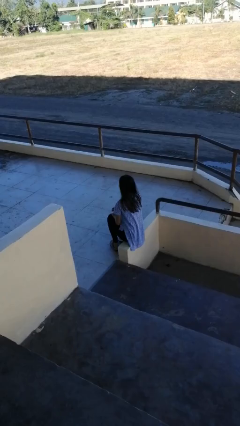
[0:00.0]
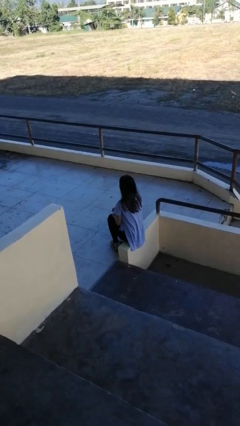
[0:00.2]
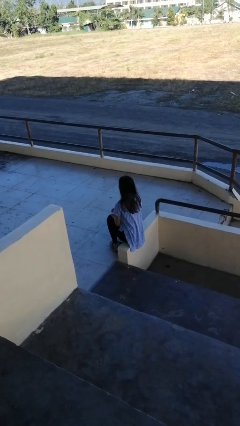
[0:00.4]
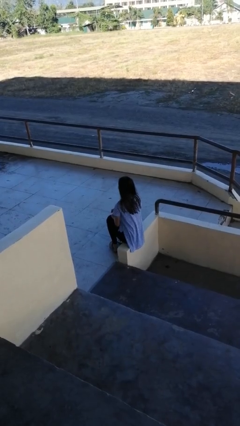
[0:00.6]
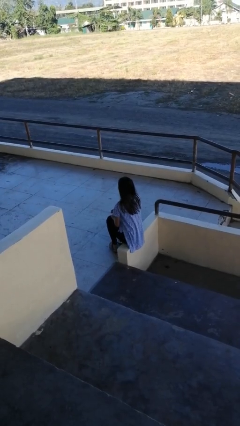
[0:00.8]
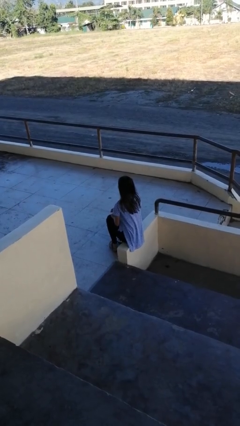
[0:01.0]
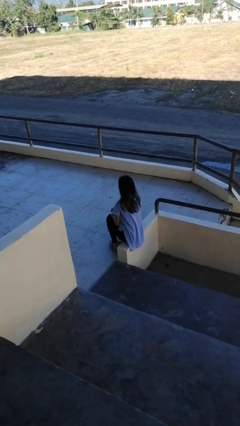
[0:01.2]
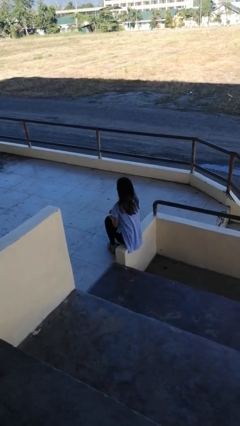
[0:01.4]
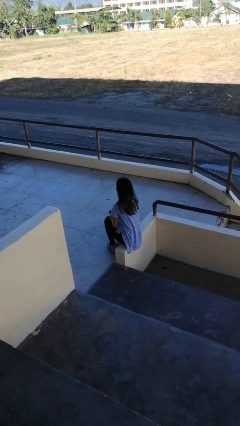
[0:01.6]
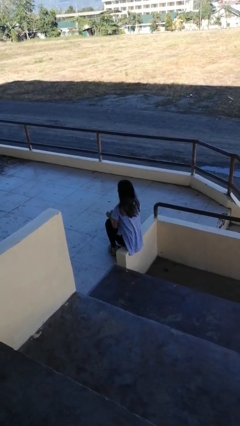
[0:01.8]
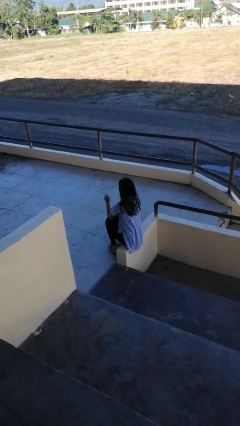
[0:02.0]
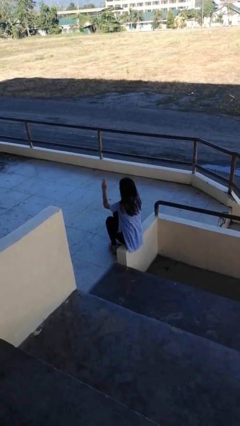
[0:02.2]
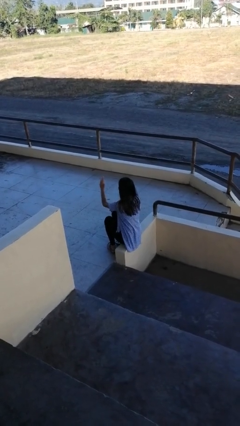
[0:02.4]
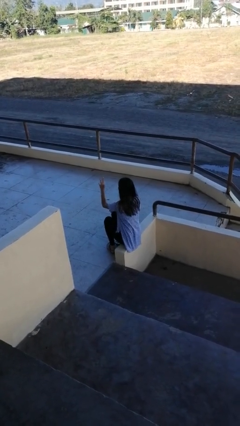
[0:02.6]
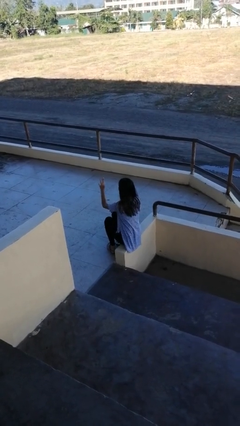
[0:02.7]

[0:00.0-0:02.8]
person gestures number three

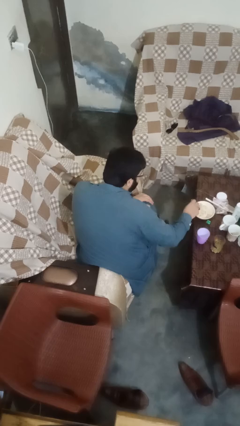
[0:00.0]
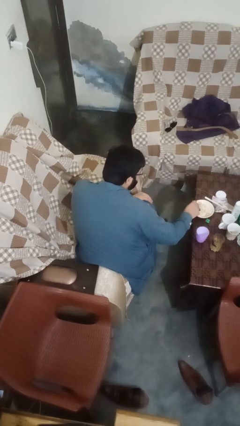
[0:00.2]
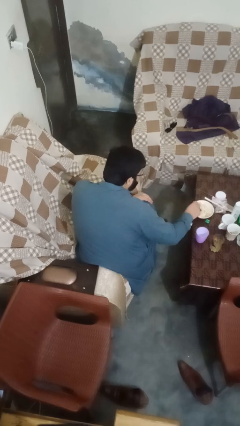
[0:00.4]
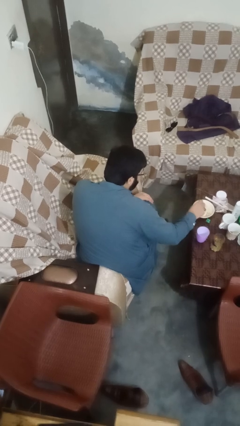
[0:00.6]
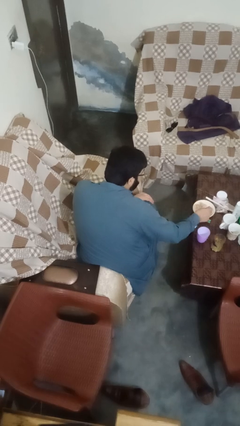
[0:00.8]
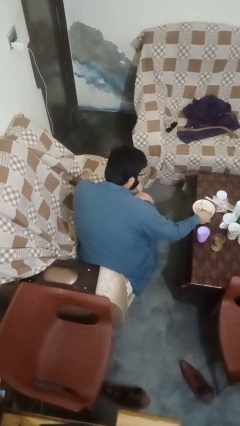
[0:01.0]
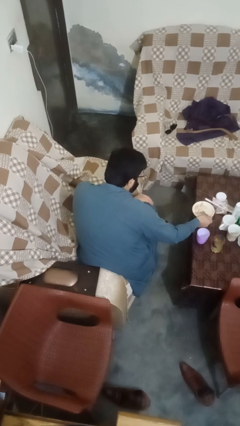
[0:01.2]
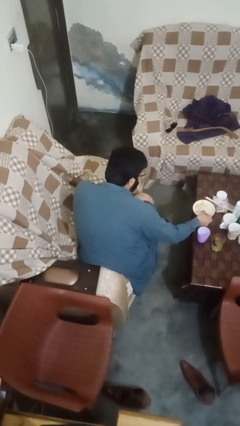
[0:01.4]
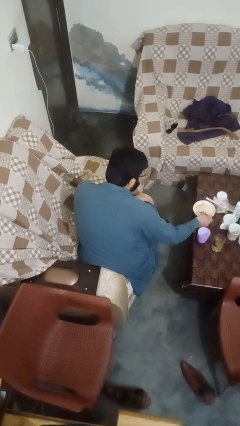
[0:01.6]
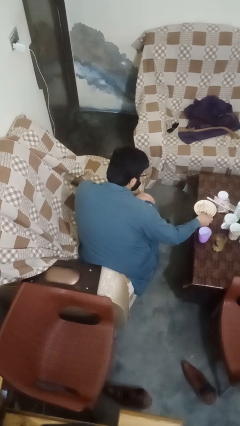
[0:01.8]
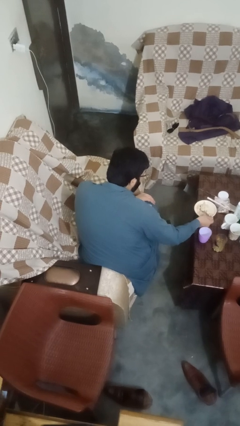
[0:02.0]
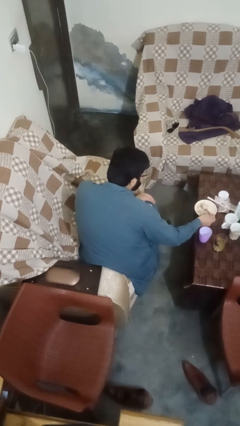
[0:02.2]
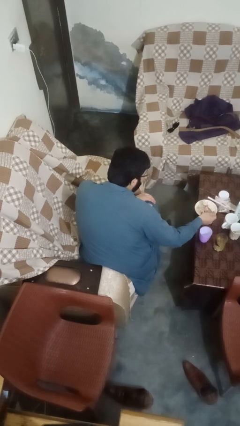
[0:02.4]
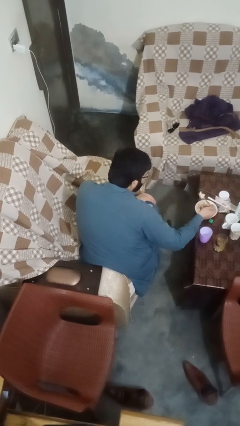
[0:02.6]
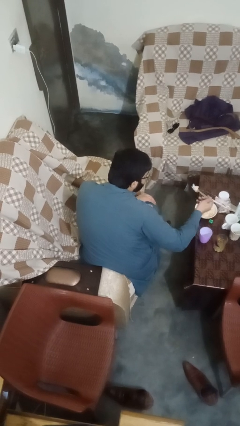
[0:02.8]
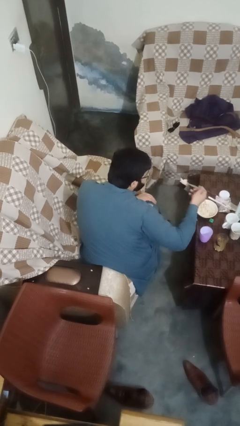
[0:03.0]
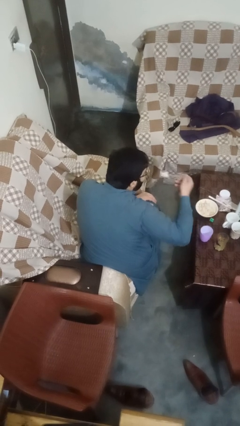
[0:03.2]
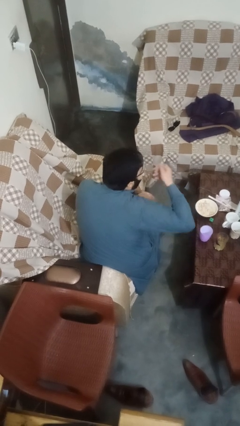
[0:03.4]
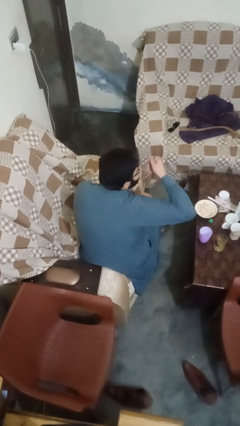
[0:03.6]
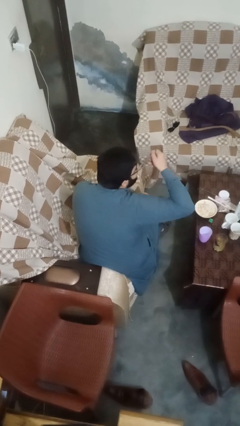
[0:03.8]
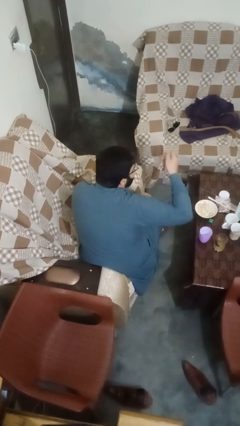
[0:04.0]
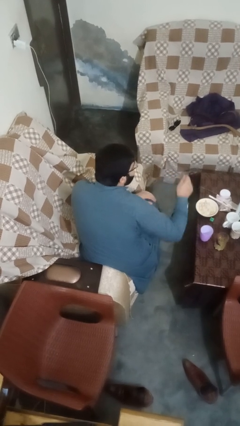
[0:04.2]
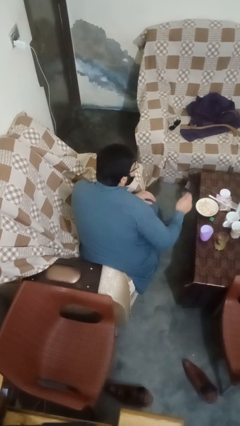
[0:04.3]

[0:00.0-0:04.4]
person eats with utensil

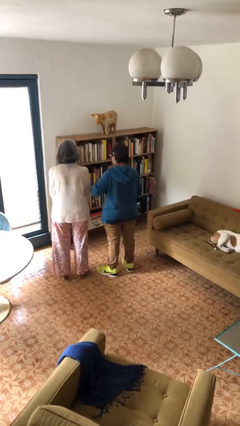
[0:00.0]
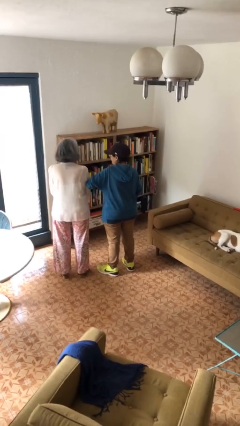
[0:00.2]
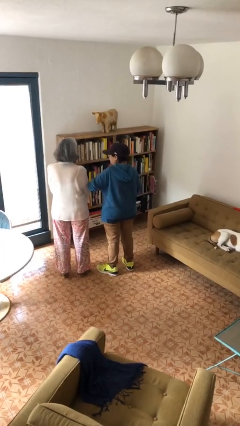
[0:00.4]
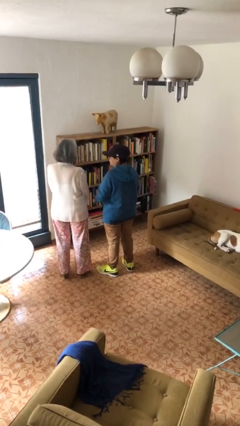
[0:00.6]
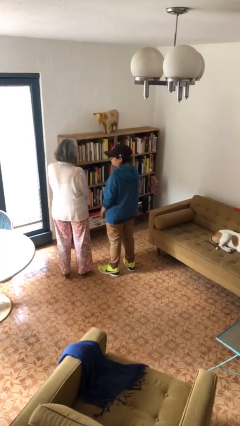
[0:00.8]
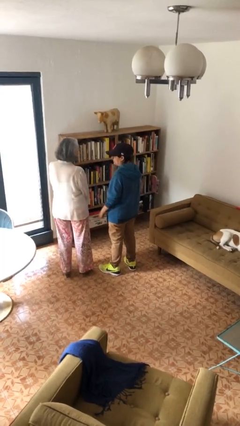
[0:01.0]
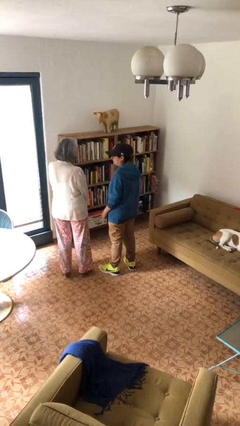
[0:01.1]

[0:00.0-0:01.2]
person nudges person with elbow

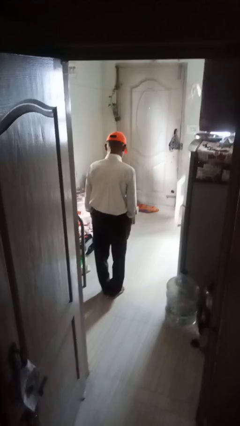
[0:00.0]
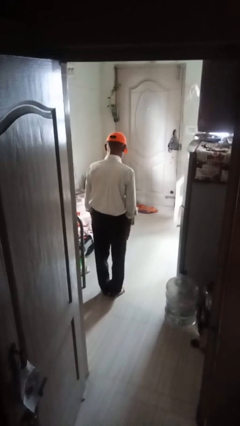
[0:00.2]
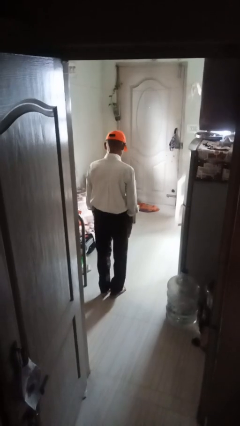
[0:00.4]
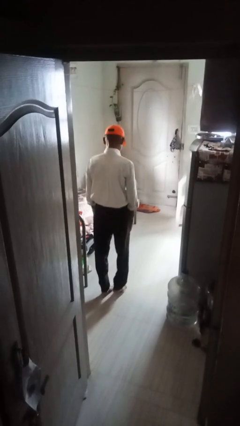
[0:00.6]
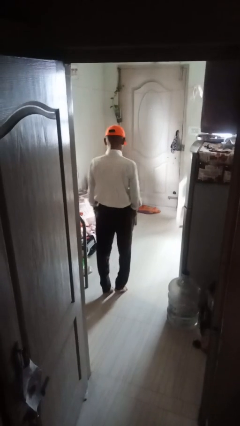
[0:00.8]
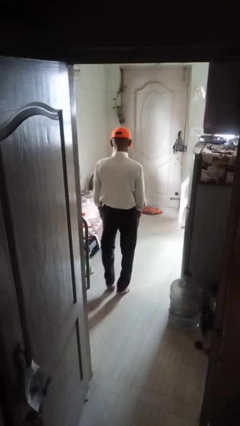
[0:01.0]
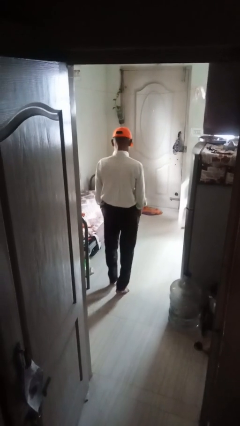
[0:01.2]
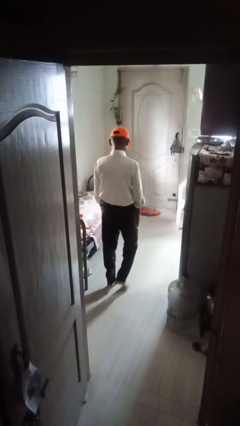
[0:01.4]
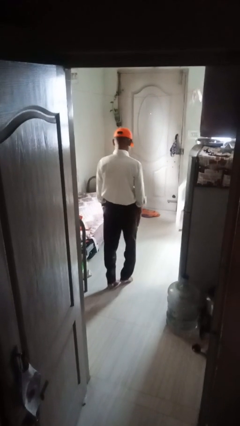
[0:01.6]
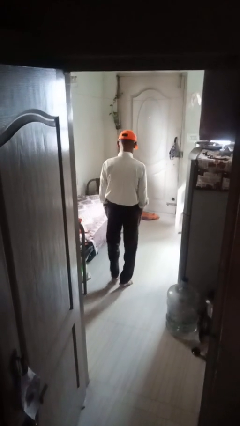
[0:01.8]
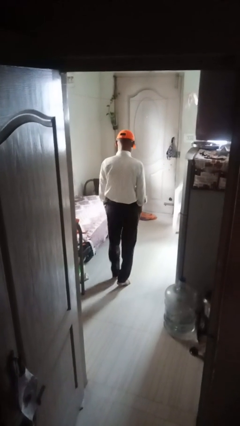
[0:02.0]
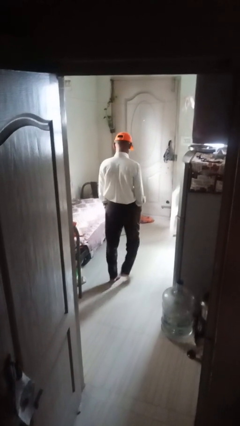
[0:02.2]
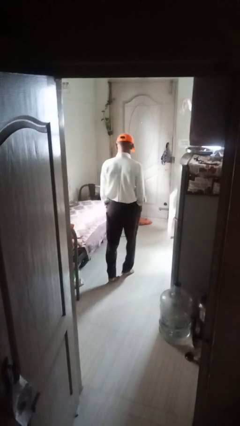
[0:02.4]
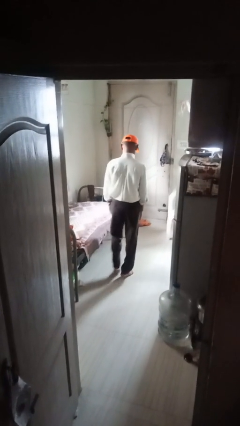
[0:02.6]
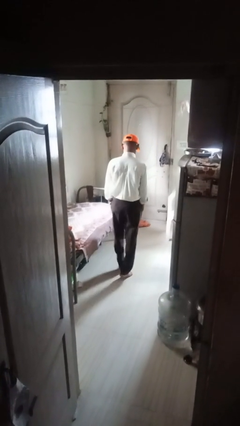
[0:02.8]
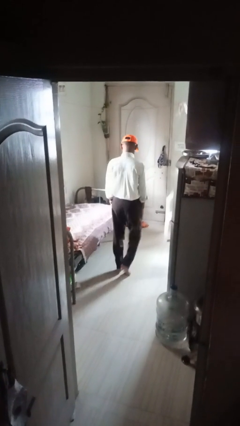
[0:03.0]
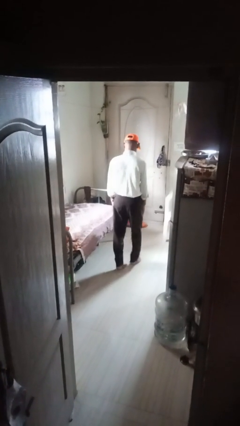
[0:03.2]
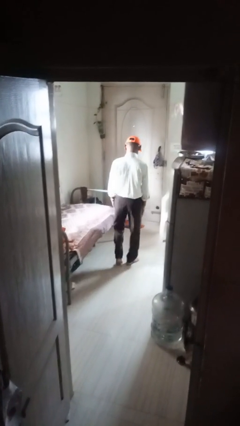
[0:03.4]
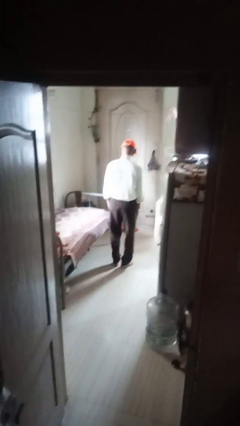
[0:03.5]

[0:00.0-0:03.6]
person walks tiptoe

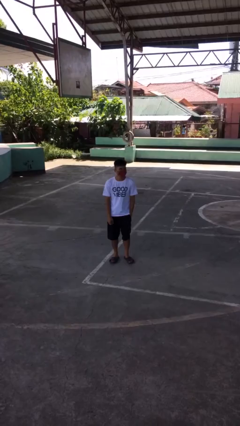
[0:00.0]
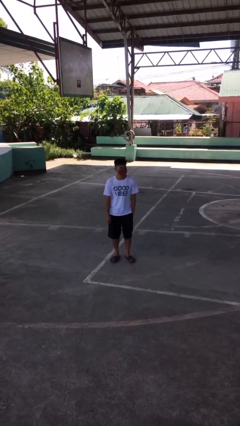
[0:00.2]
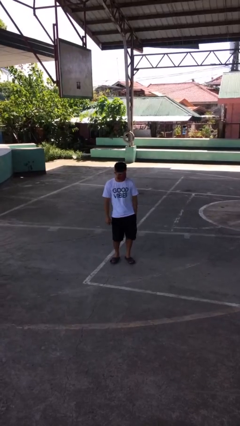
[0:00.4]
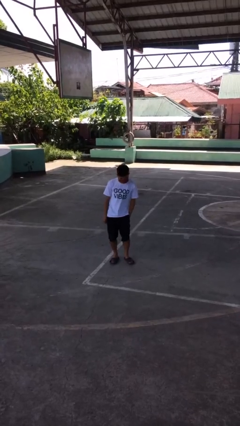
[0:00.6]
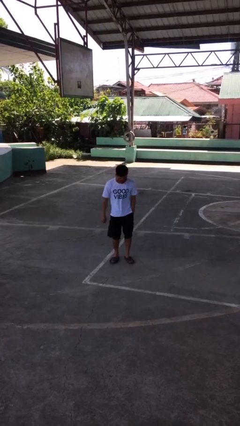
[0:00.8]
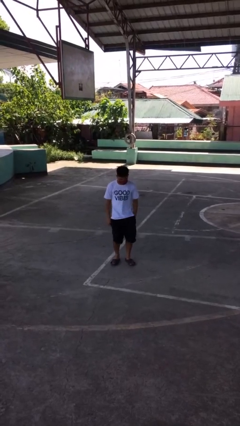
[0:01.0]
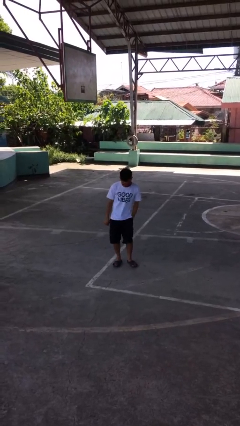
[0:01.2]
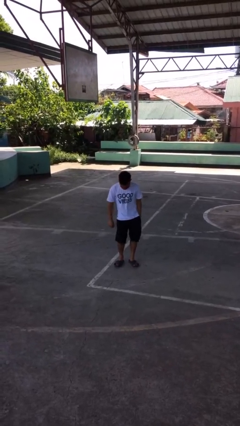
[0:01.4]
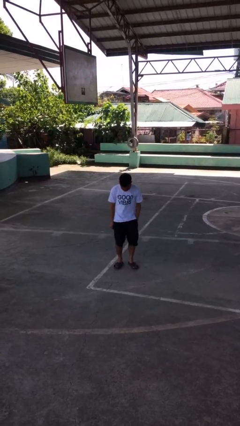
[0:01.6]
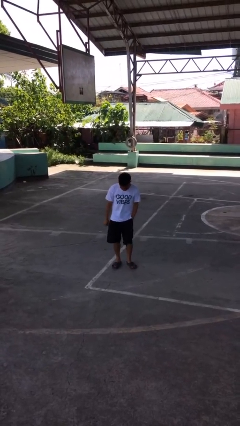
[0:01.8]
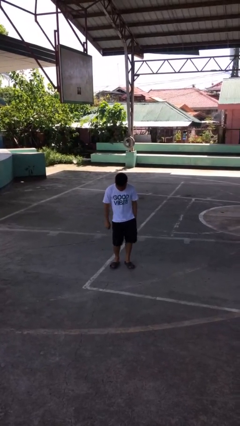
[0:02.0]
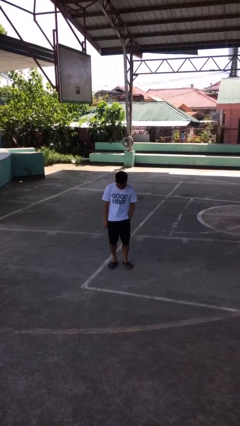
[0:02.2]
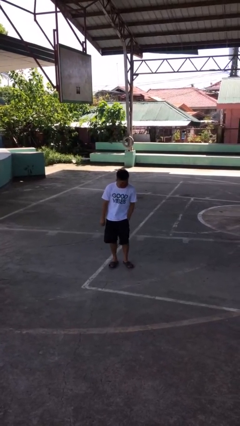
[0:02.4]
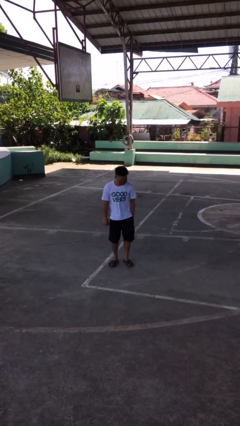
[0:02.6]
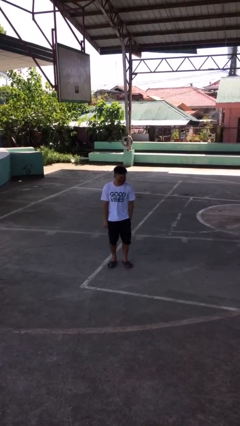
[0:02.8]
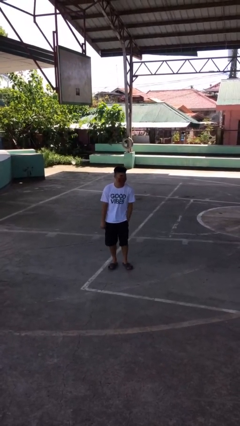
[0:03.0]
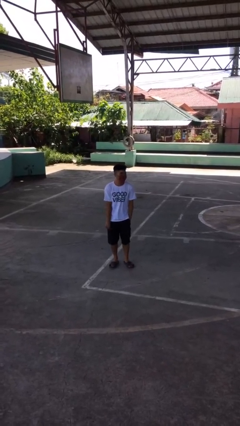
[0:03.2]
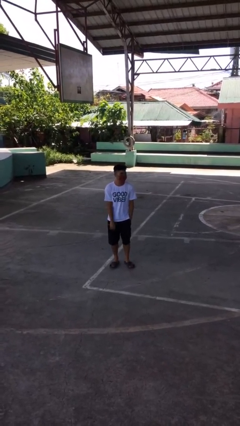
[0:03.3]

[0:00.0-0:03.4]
person wiggles hips

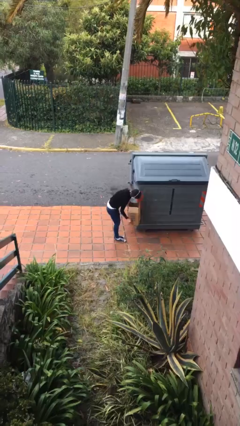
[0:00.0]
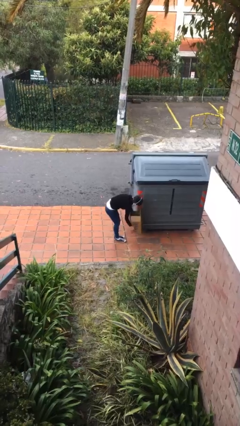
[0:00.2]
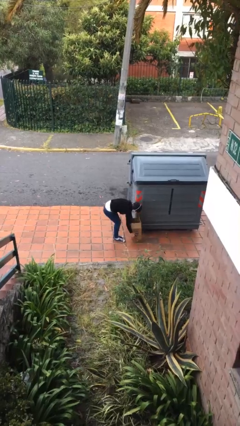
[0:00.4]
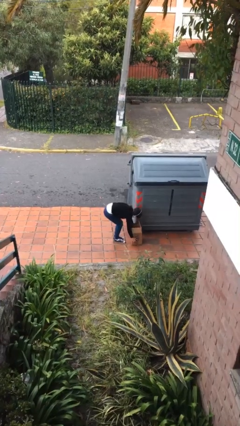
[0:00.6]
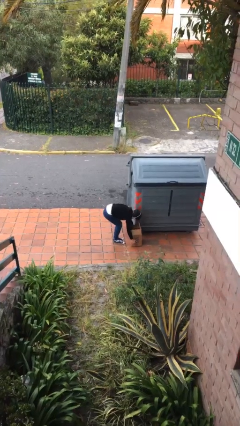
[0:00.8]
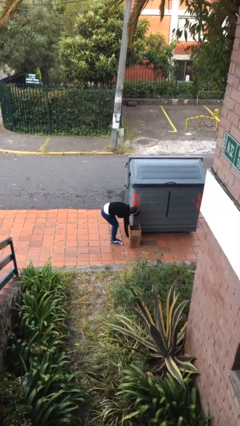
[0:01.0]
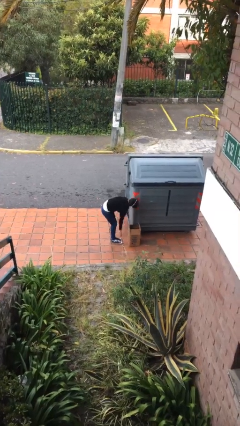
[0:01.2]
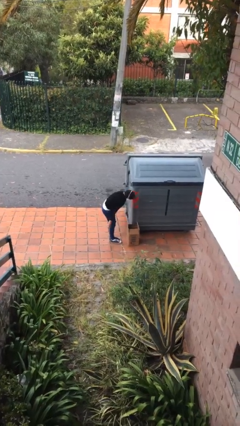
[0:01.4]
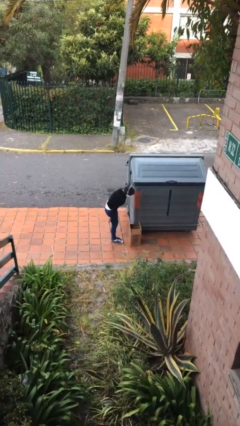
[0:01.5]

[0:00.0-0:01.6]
person puts down object on floor

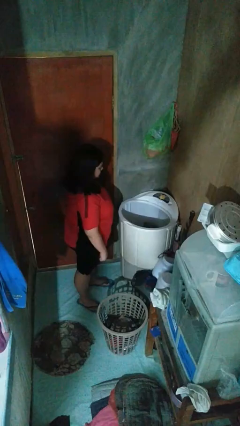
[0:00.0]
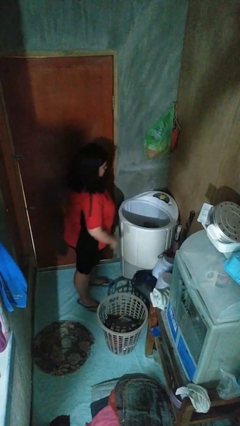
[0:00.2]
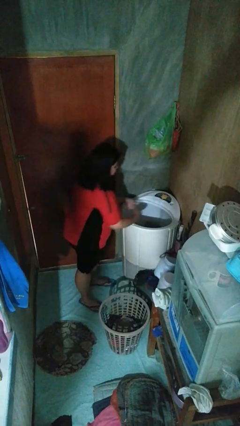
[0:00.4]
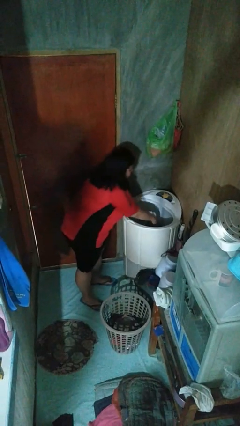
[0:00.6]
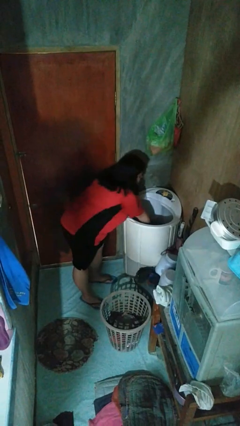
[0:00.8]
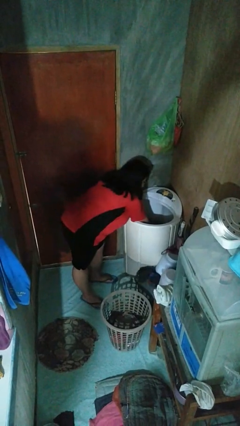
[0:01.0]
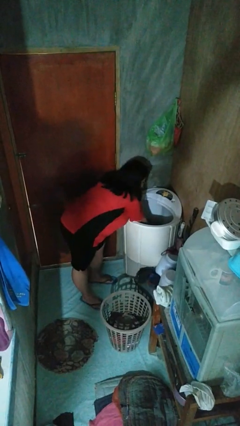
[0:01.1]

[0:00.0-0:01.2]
person loads clotheswasher
